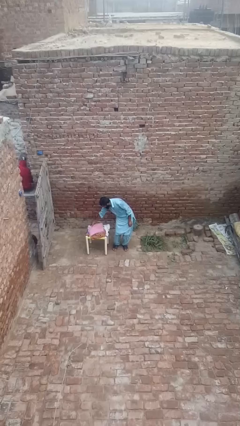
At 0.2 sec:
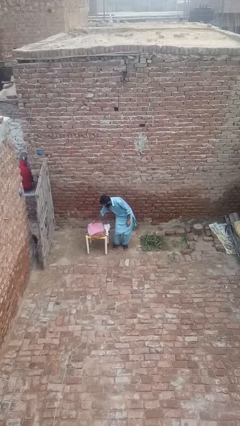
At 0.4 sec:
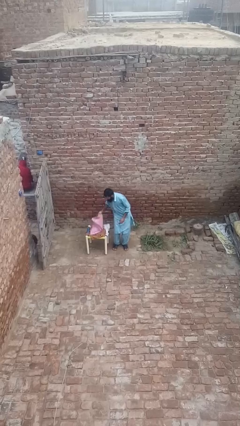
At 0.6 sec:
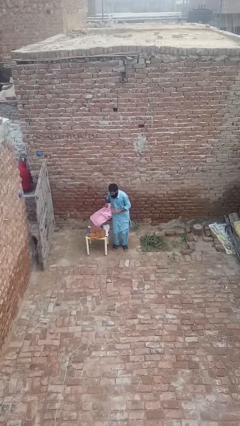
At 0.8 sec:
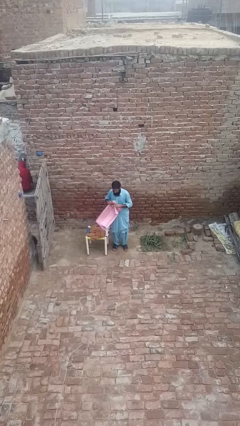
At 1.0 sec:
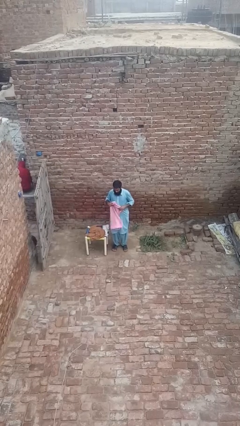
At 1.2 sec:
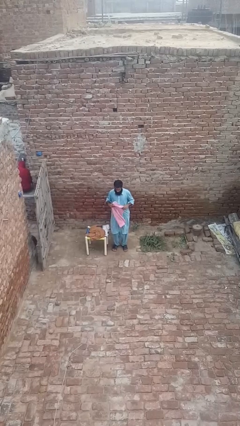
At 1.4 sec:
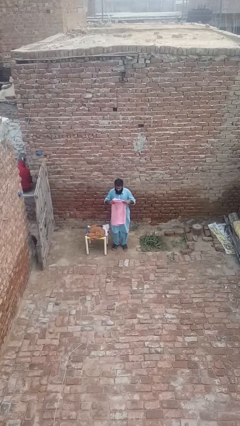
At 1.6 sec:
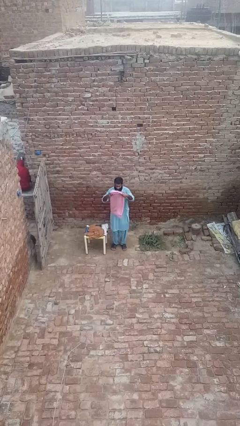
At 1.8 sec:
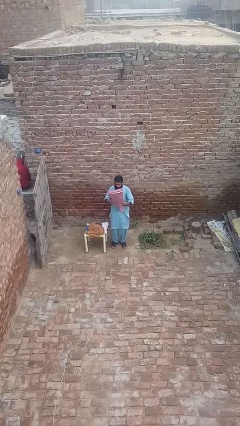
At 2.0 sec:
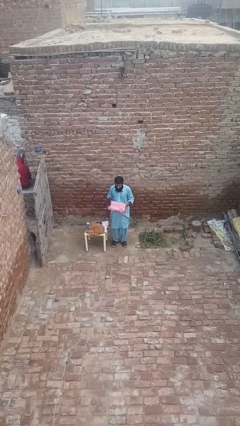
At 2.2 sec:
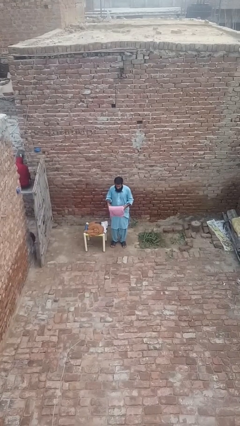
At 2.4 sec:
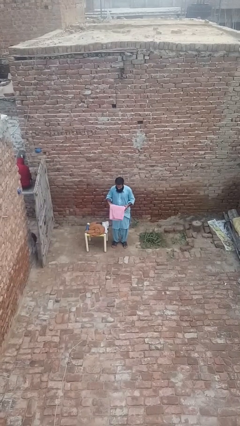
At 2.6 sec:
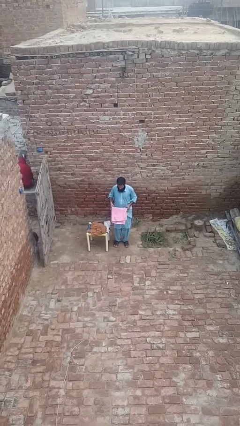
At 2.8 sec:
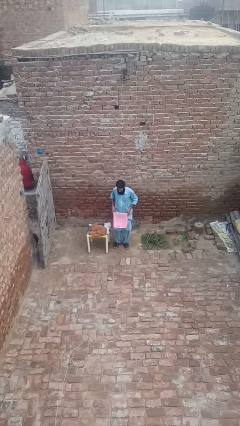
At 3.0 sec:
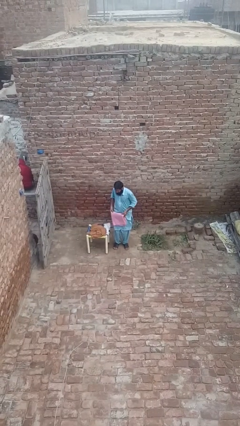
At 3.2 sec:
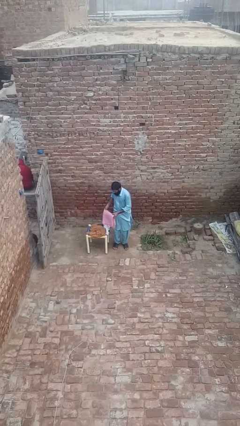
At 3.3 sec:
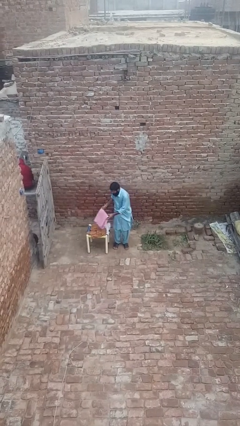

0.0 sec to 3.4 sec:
person folds towel

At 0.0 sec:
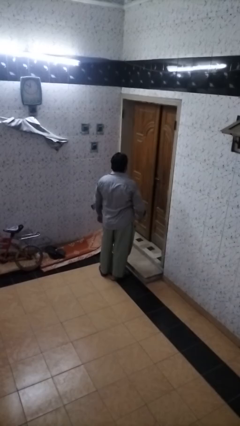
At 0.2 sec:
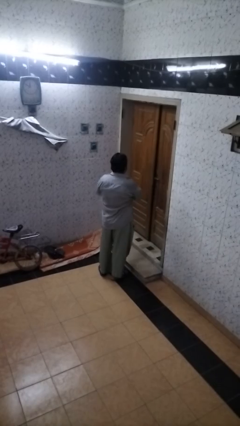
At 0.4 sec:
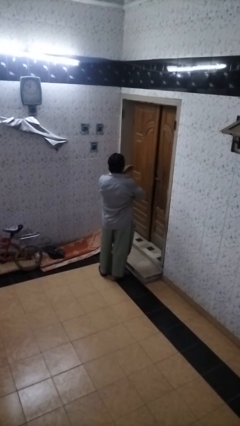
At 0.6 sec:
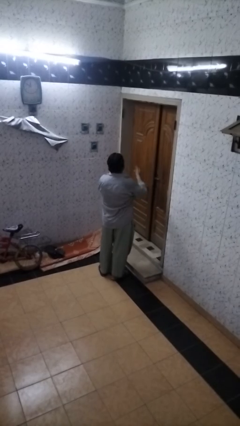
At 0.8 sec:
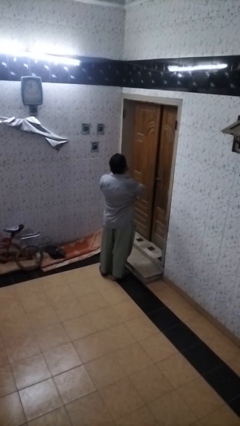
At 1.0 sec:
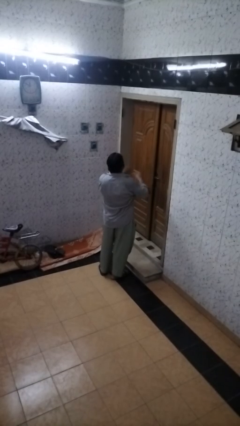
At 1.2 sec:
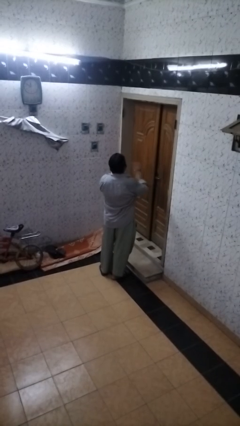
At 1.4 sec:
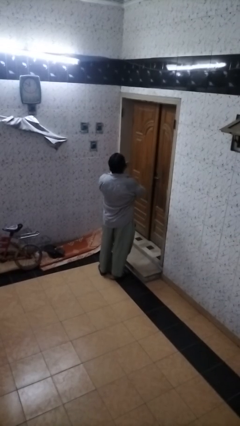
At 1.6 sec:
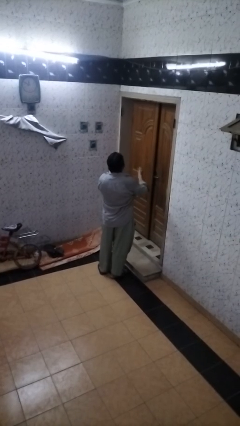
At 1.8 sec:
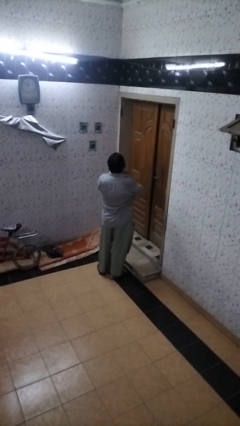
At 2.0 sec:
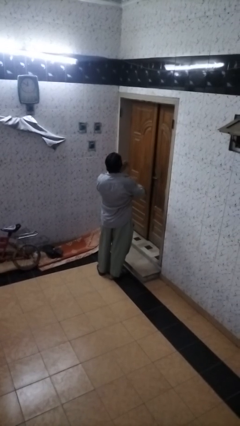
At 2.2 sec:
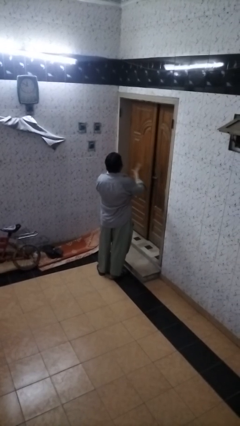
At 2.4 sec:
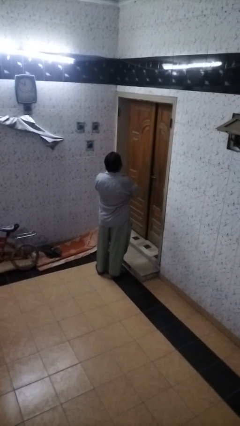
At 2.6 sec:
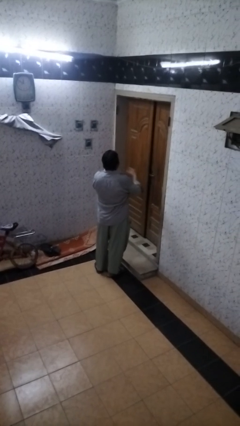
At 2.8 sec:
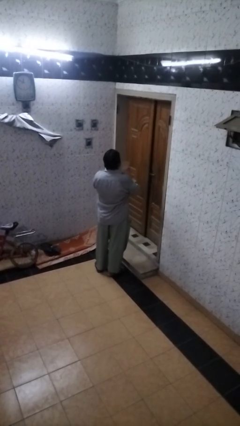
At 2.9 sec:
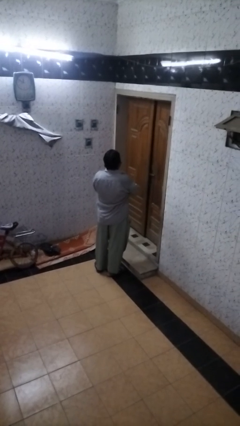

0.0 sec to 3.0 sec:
person drums on chest

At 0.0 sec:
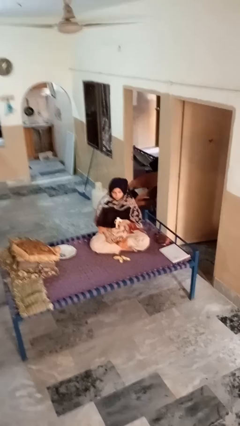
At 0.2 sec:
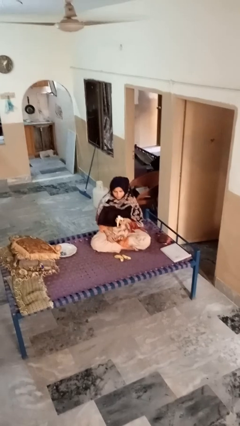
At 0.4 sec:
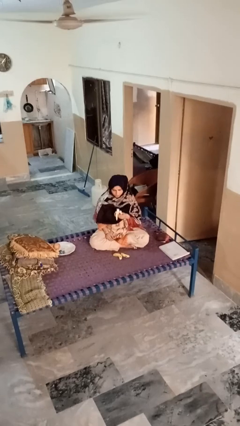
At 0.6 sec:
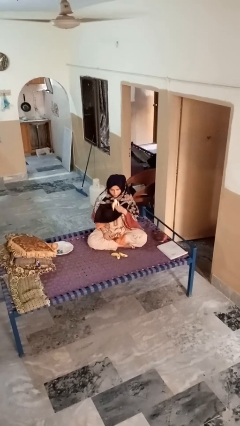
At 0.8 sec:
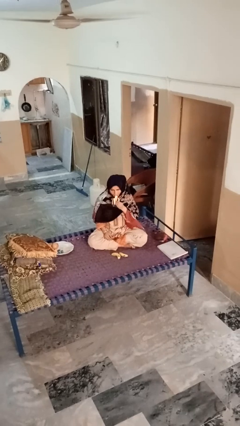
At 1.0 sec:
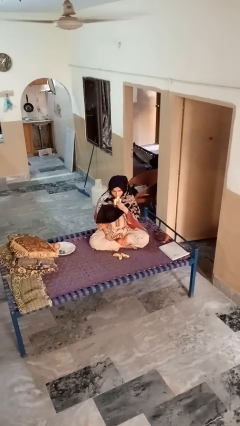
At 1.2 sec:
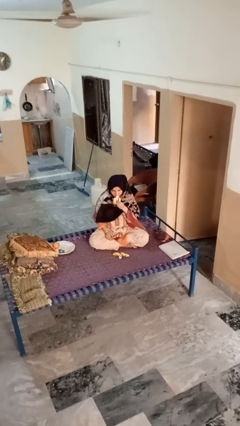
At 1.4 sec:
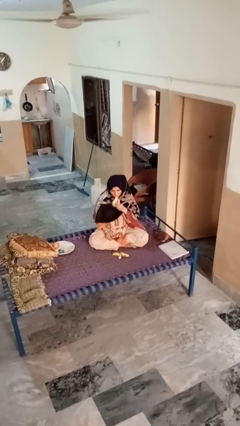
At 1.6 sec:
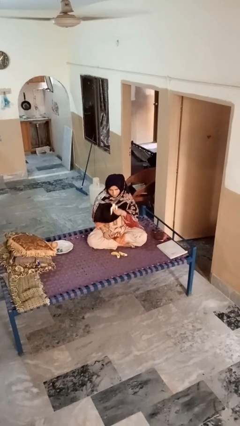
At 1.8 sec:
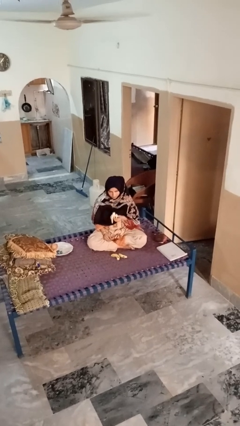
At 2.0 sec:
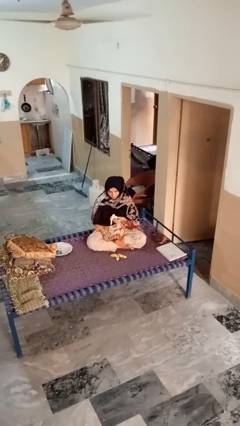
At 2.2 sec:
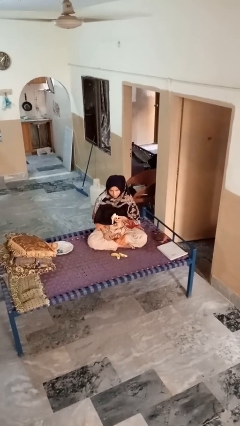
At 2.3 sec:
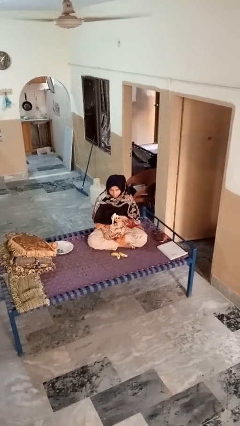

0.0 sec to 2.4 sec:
person eats banana

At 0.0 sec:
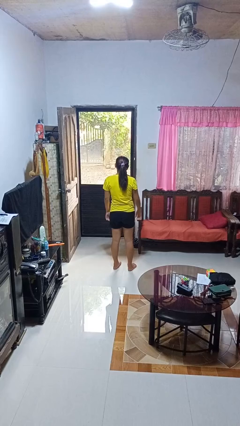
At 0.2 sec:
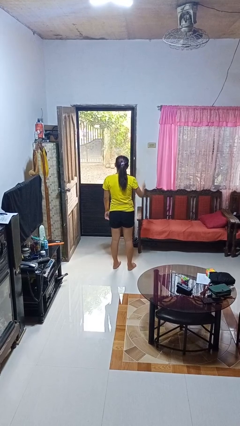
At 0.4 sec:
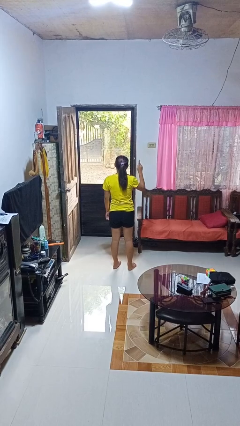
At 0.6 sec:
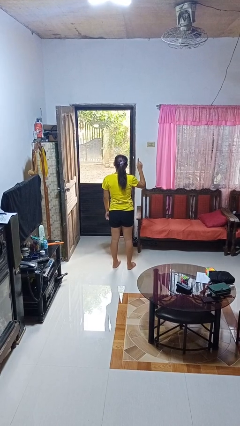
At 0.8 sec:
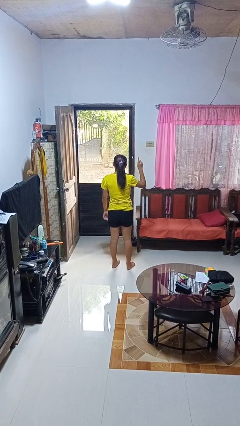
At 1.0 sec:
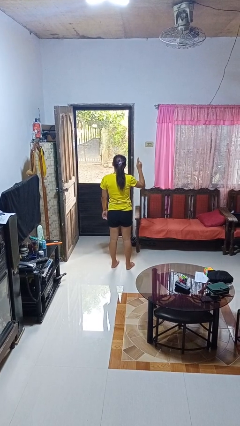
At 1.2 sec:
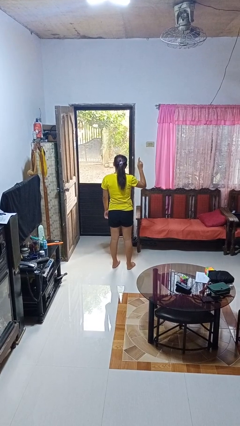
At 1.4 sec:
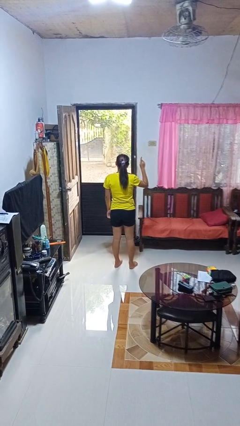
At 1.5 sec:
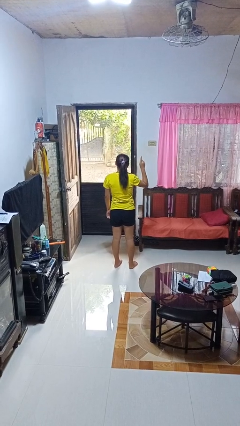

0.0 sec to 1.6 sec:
person gestures number one

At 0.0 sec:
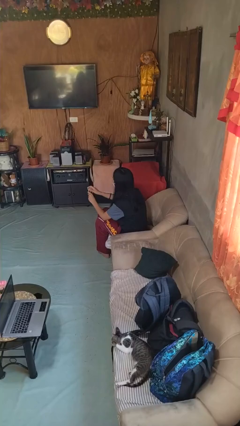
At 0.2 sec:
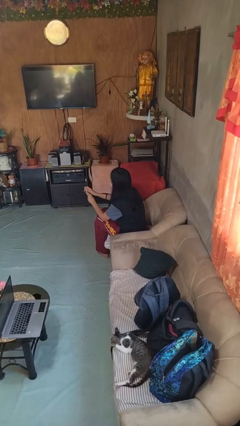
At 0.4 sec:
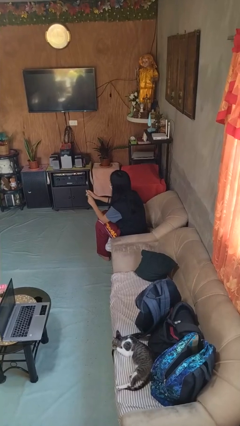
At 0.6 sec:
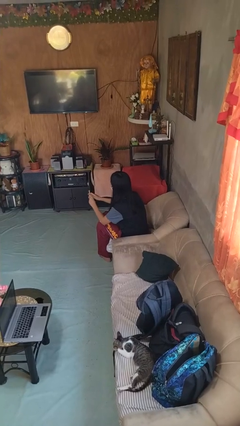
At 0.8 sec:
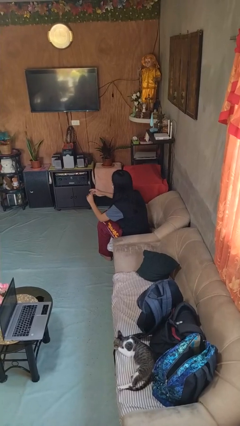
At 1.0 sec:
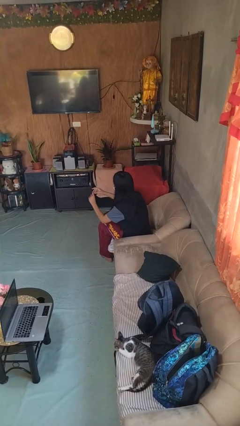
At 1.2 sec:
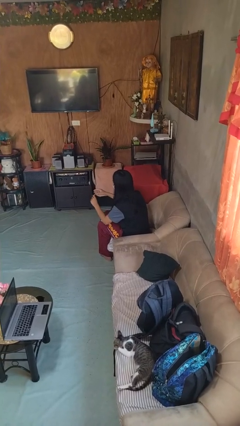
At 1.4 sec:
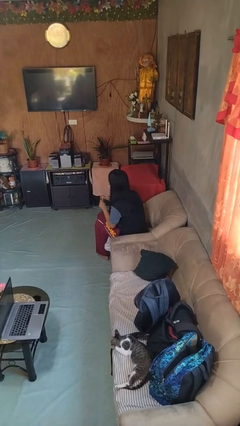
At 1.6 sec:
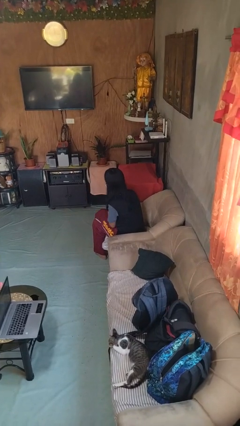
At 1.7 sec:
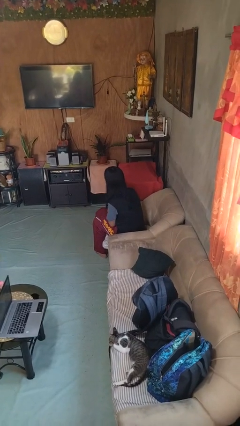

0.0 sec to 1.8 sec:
person files fingernails

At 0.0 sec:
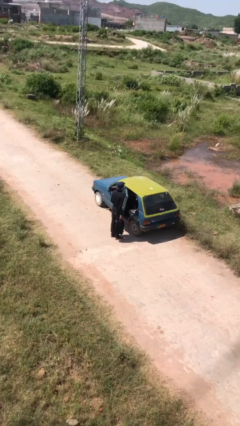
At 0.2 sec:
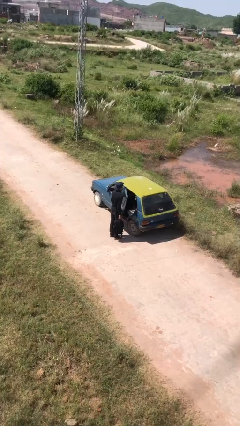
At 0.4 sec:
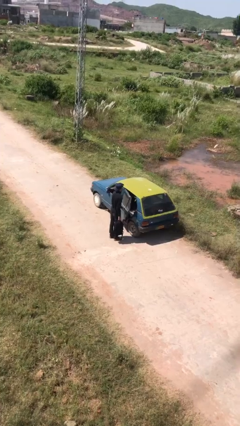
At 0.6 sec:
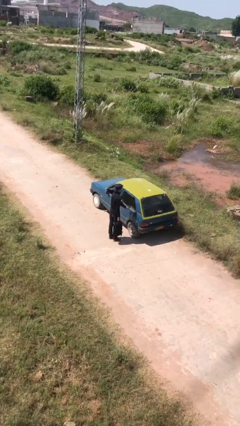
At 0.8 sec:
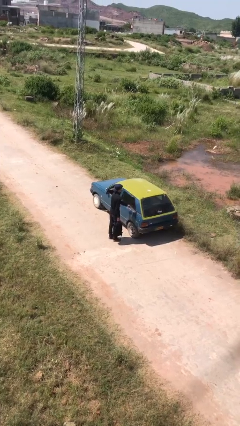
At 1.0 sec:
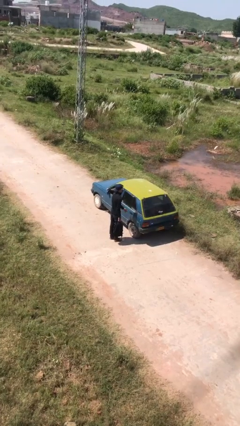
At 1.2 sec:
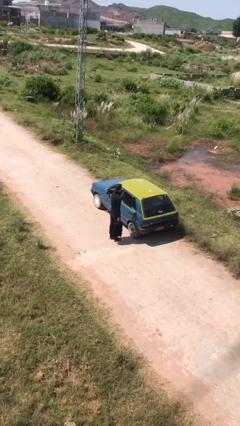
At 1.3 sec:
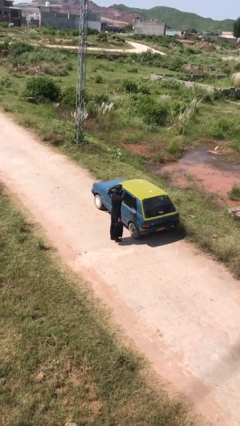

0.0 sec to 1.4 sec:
person closes car door

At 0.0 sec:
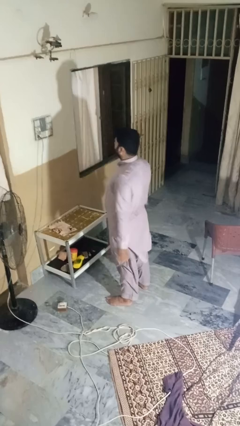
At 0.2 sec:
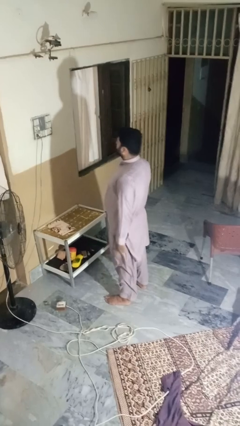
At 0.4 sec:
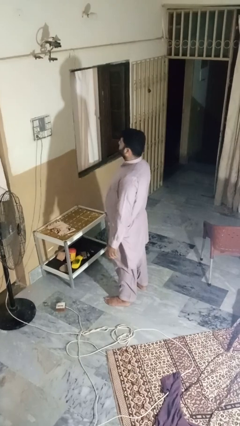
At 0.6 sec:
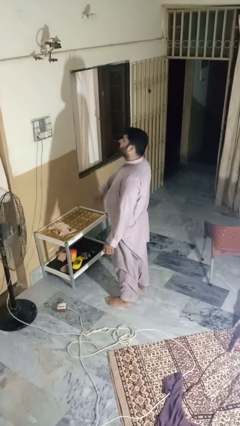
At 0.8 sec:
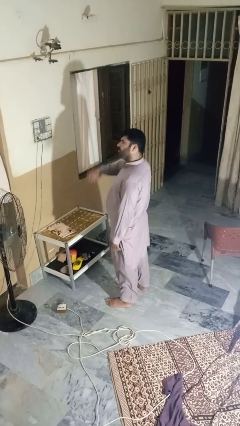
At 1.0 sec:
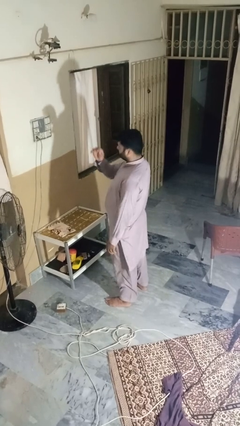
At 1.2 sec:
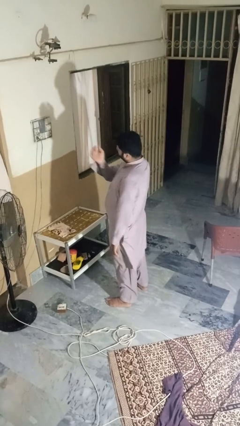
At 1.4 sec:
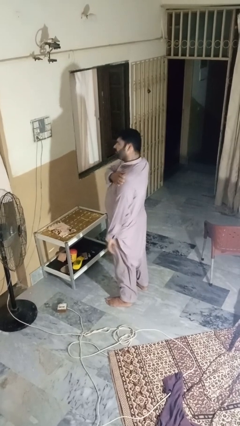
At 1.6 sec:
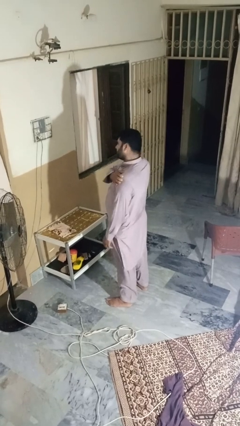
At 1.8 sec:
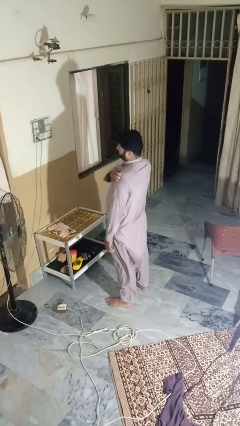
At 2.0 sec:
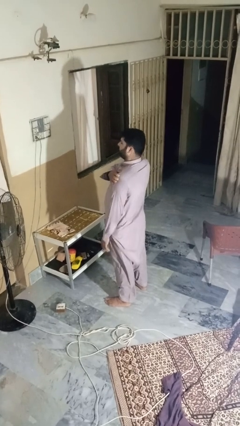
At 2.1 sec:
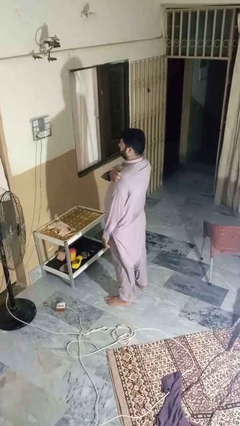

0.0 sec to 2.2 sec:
person shrugs

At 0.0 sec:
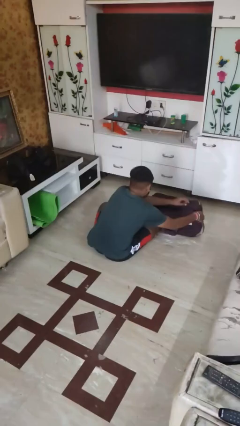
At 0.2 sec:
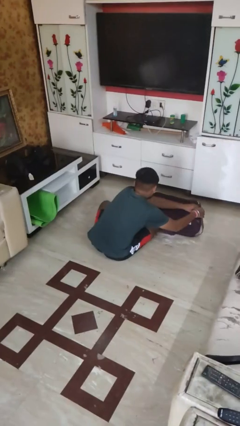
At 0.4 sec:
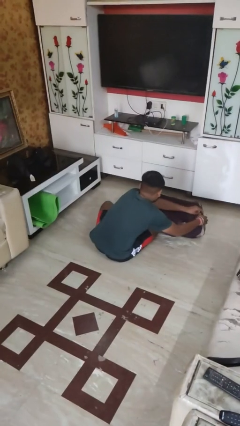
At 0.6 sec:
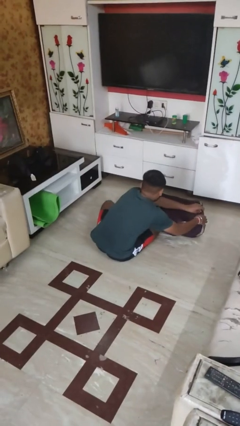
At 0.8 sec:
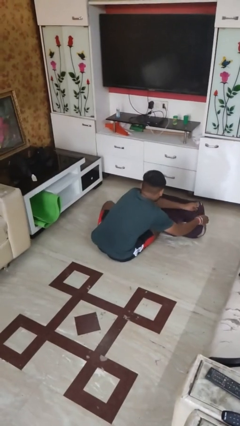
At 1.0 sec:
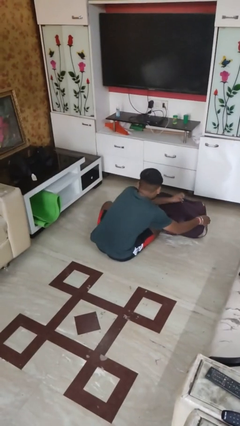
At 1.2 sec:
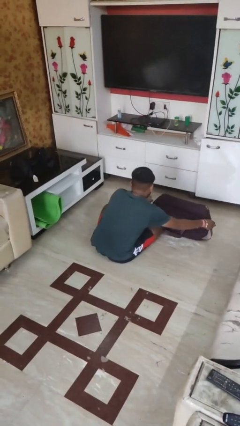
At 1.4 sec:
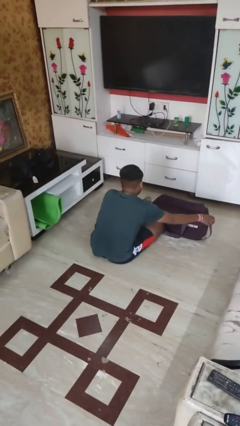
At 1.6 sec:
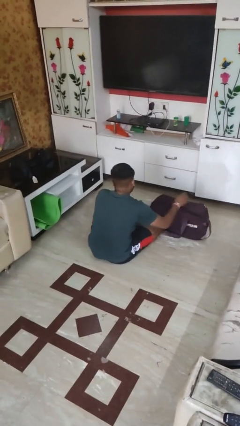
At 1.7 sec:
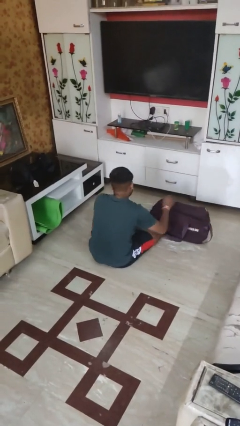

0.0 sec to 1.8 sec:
person closes suitcase
